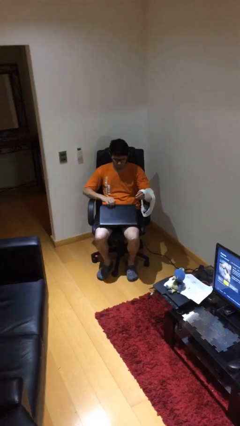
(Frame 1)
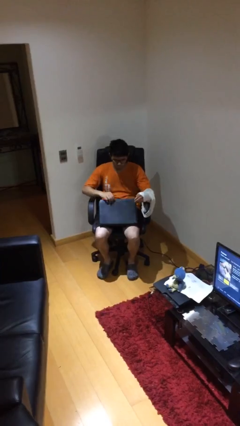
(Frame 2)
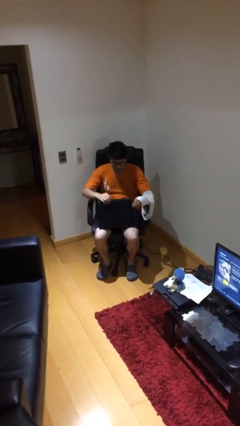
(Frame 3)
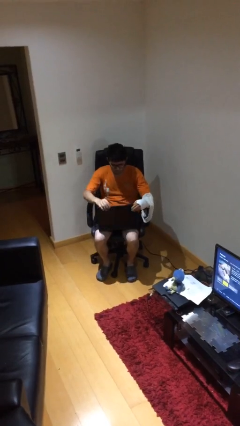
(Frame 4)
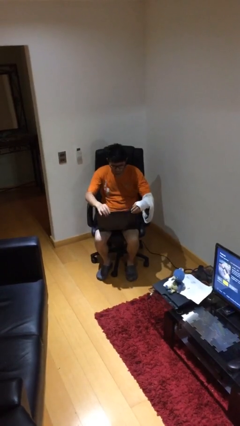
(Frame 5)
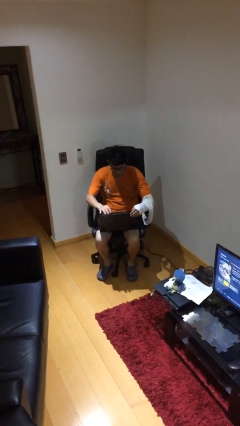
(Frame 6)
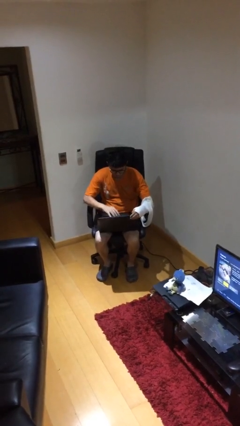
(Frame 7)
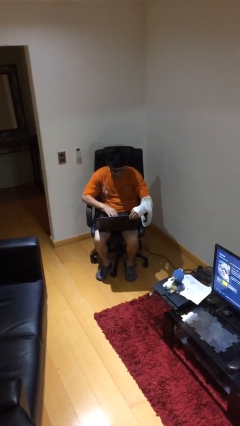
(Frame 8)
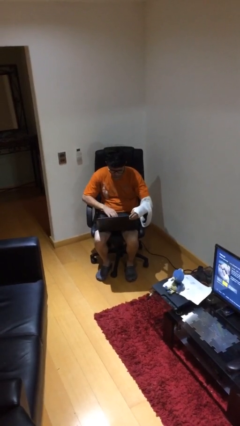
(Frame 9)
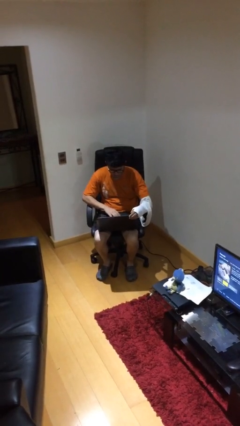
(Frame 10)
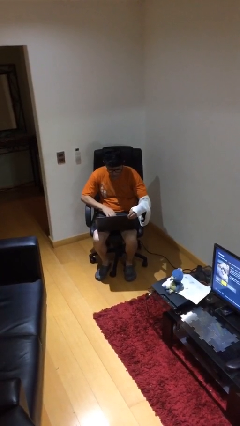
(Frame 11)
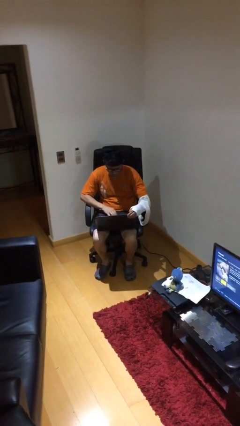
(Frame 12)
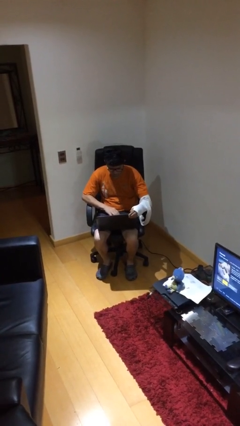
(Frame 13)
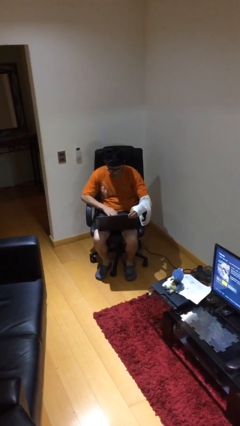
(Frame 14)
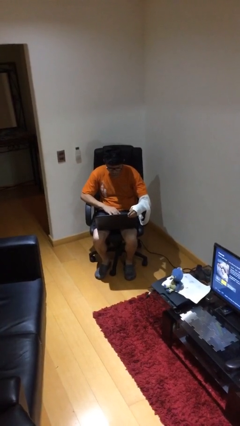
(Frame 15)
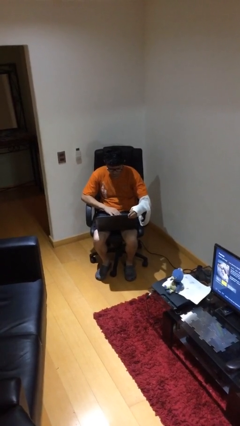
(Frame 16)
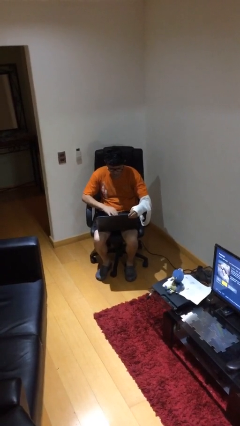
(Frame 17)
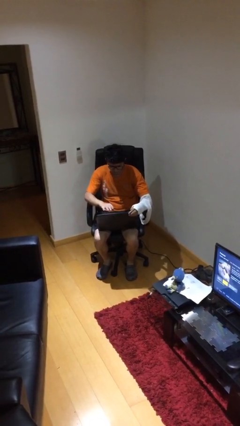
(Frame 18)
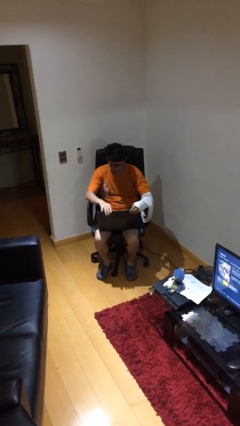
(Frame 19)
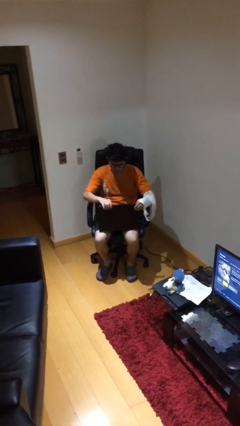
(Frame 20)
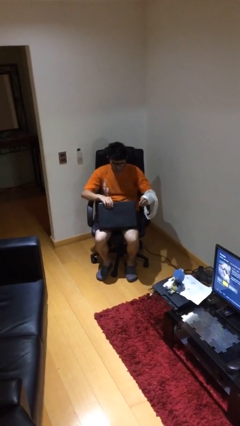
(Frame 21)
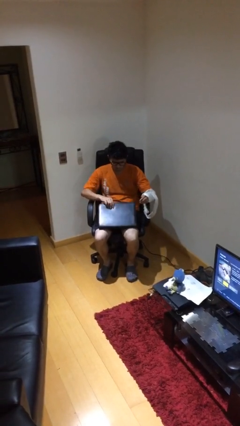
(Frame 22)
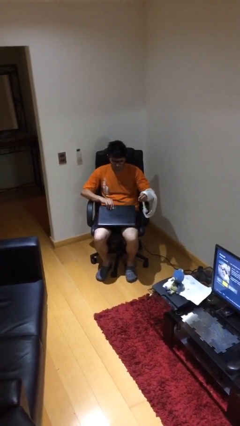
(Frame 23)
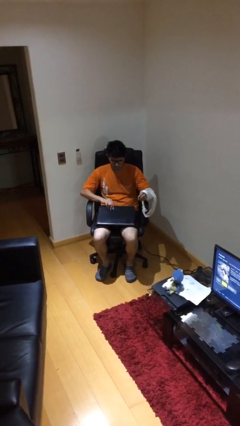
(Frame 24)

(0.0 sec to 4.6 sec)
person interacts with laptop

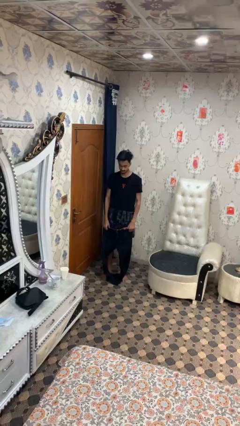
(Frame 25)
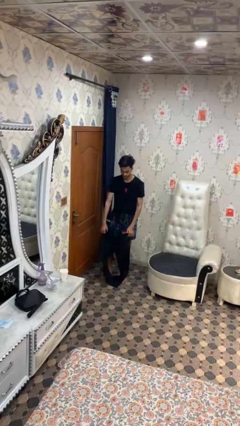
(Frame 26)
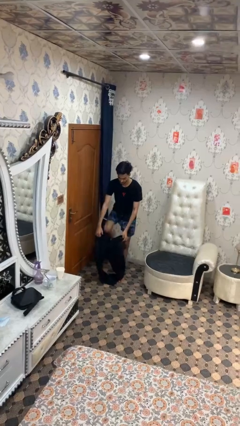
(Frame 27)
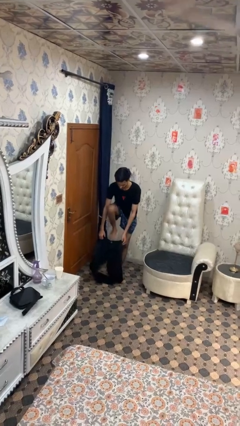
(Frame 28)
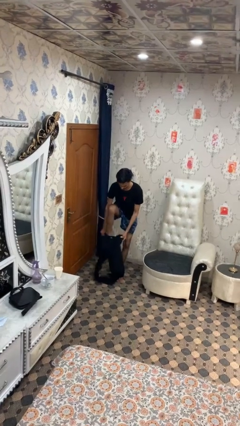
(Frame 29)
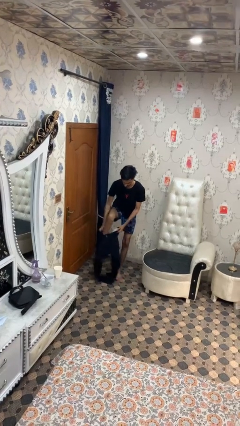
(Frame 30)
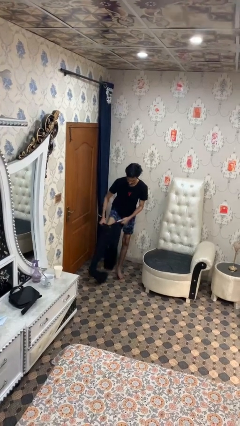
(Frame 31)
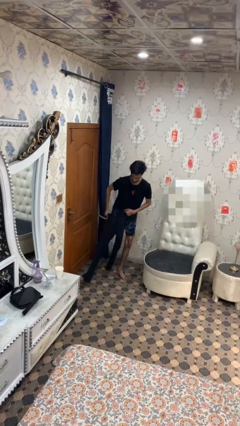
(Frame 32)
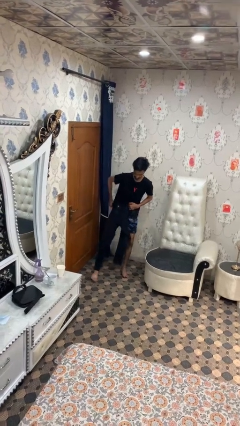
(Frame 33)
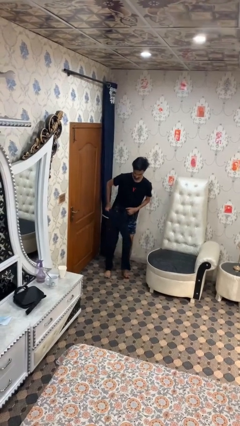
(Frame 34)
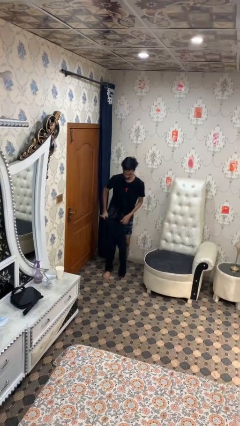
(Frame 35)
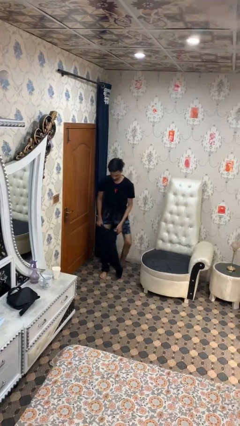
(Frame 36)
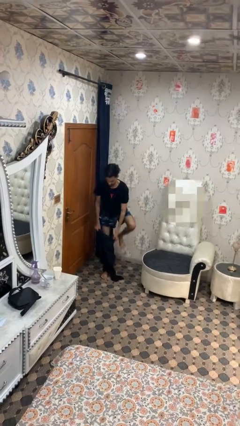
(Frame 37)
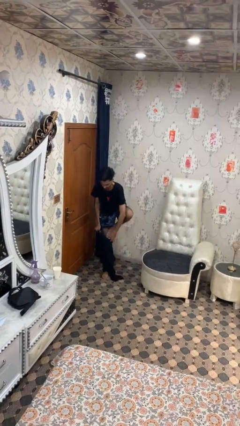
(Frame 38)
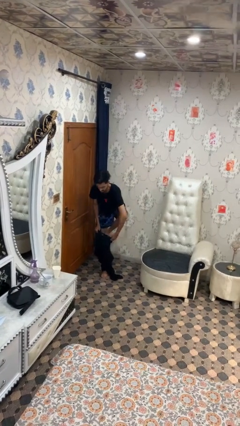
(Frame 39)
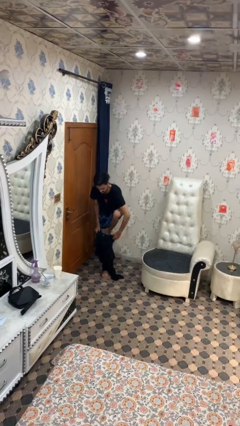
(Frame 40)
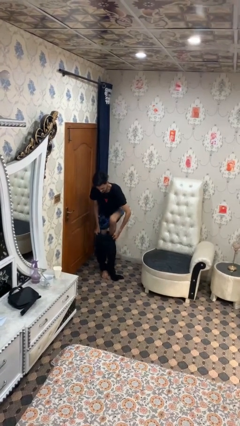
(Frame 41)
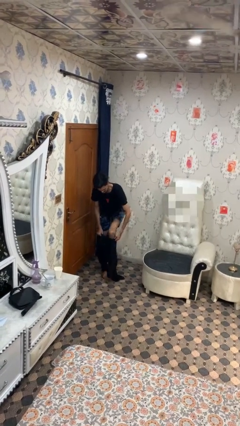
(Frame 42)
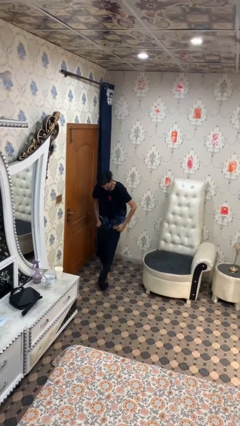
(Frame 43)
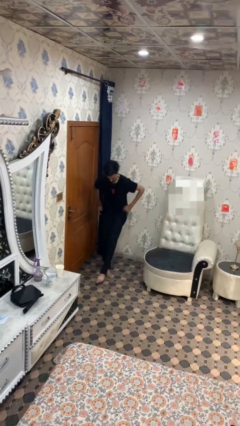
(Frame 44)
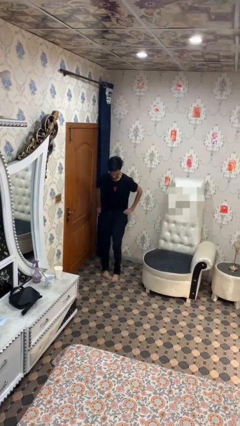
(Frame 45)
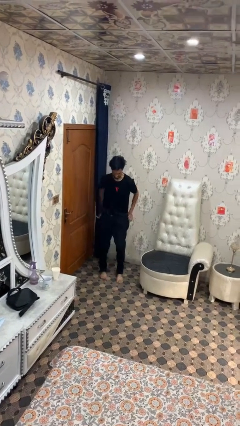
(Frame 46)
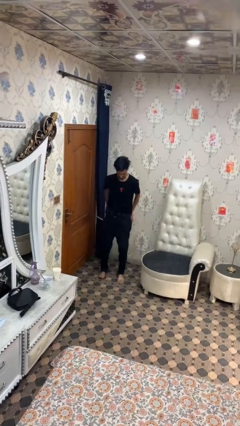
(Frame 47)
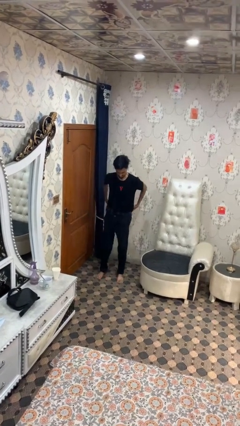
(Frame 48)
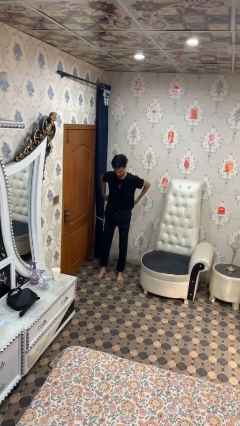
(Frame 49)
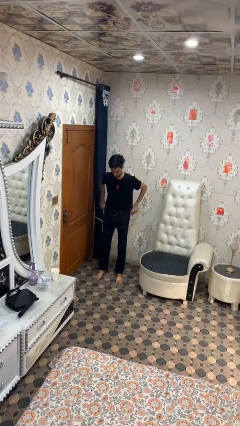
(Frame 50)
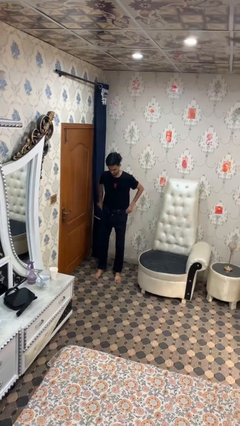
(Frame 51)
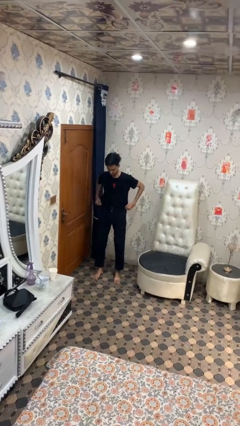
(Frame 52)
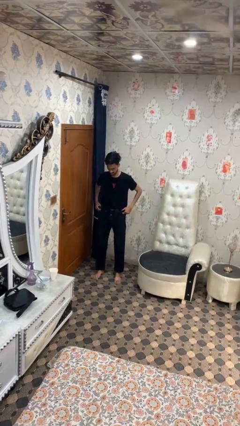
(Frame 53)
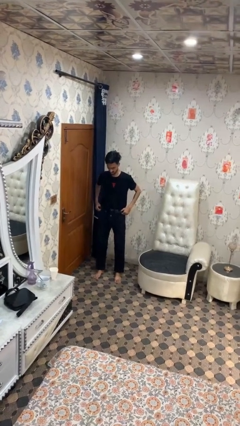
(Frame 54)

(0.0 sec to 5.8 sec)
person puts on pants

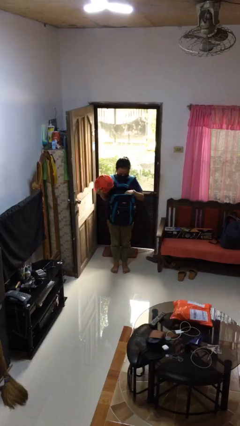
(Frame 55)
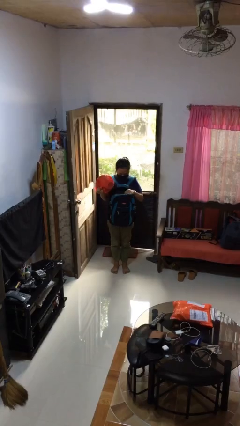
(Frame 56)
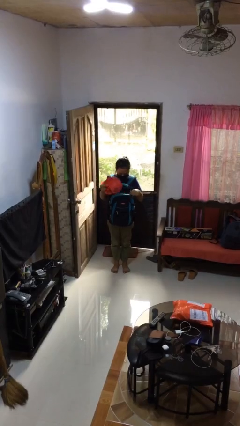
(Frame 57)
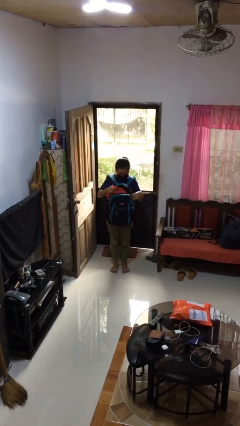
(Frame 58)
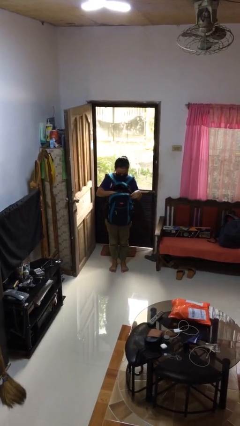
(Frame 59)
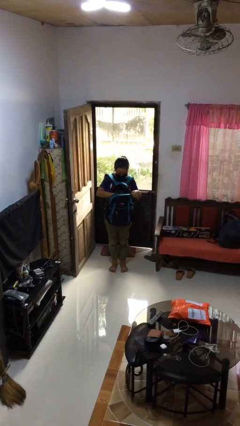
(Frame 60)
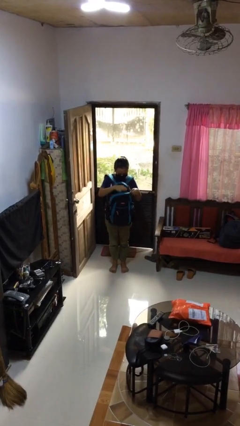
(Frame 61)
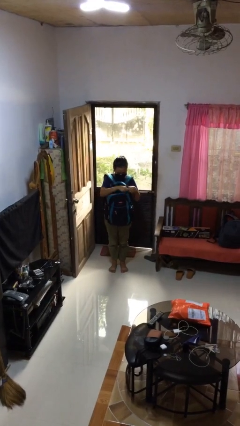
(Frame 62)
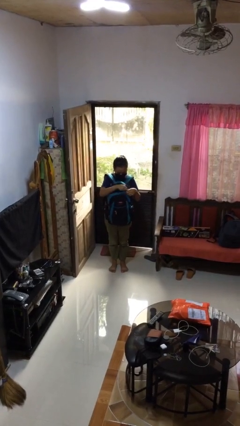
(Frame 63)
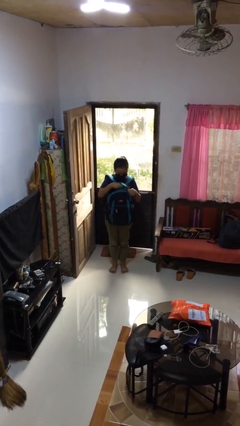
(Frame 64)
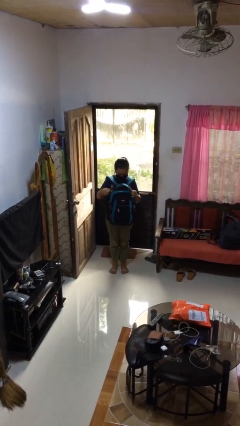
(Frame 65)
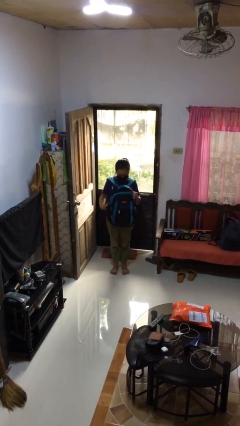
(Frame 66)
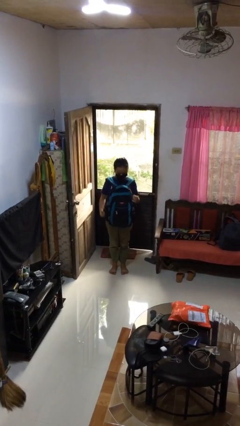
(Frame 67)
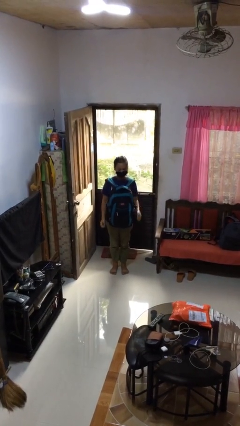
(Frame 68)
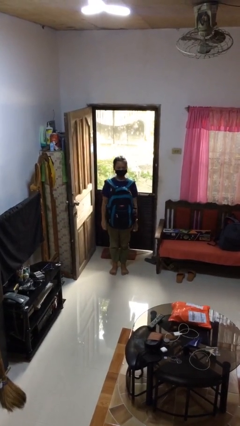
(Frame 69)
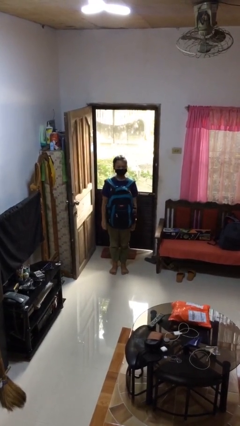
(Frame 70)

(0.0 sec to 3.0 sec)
person puts object into backpack

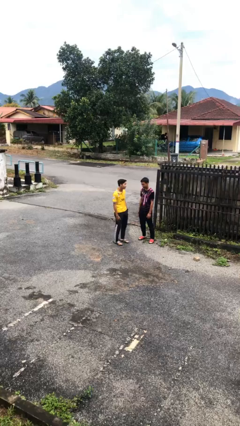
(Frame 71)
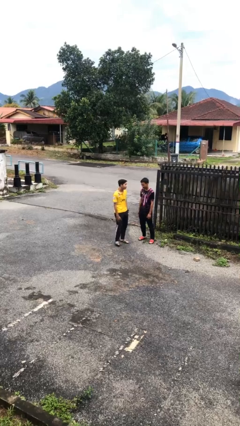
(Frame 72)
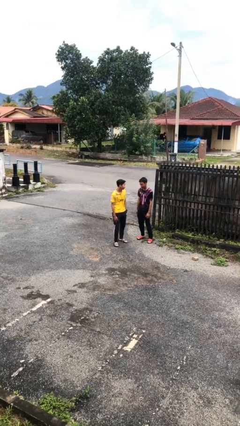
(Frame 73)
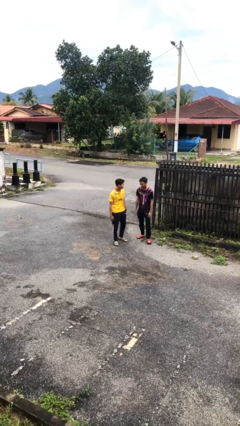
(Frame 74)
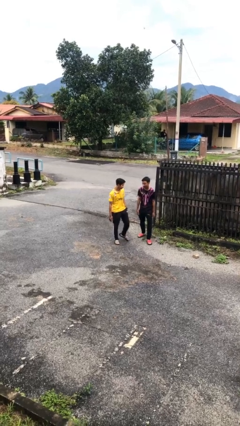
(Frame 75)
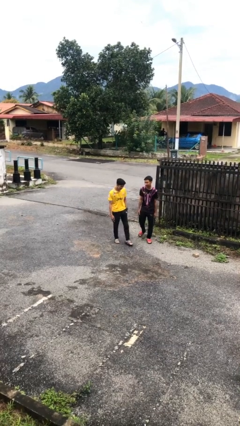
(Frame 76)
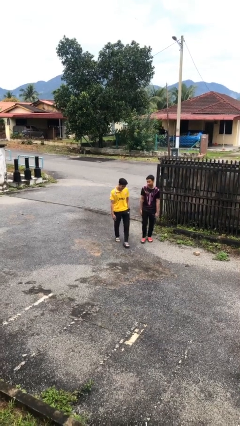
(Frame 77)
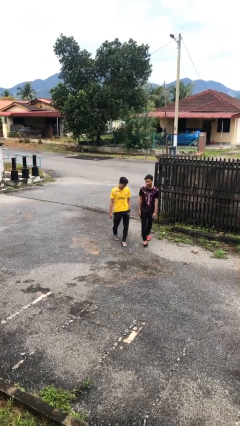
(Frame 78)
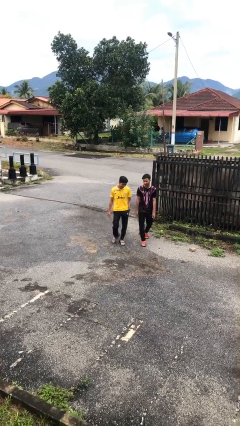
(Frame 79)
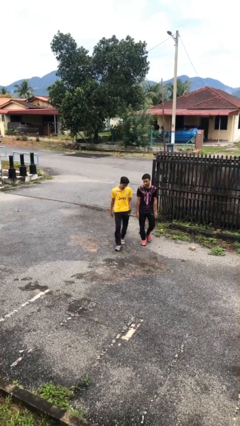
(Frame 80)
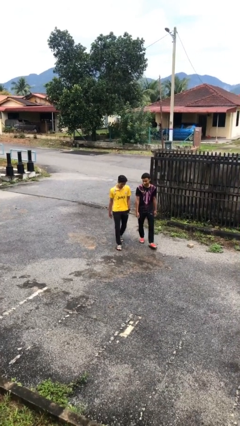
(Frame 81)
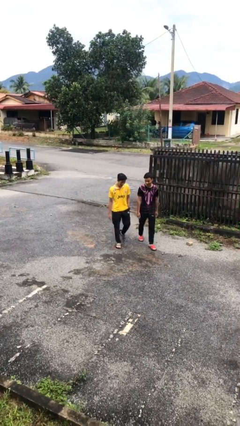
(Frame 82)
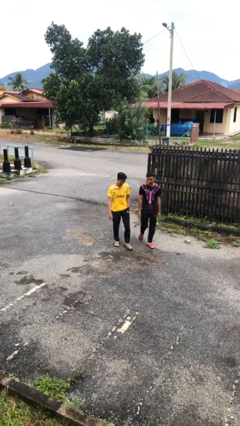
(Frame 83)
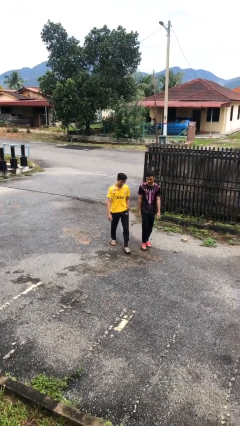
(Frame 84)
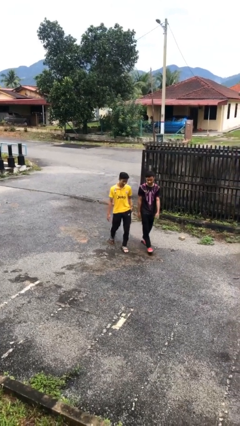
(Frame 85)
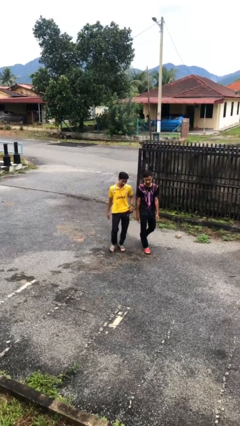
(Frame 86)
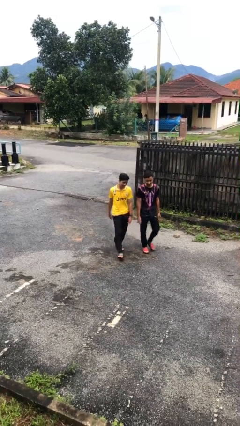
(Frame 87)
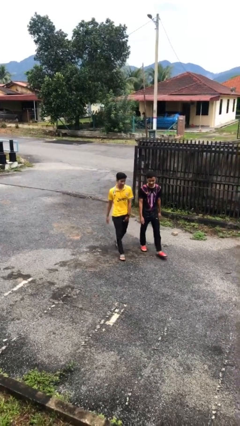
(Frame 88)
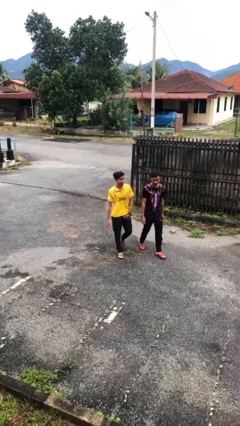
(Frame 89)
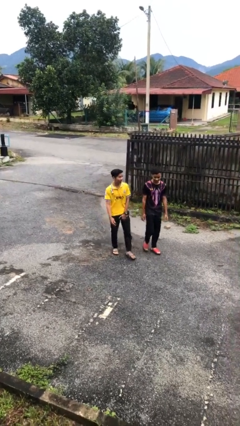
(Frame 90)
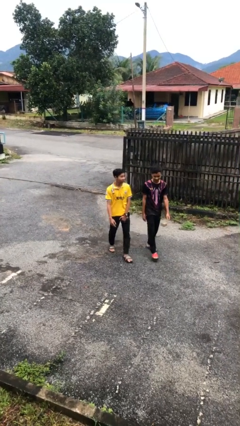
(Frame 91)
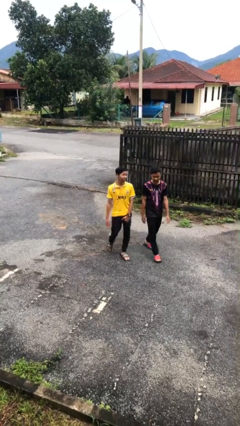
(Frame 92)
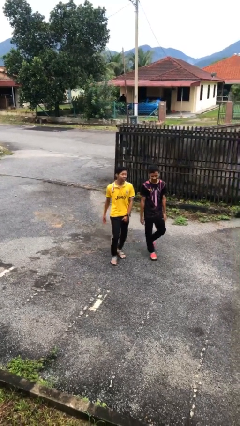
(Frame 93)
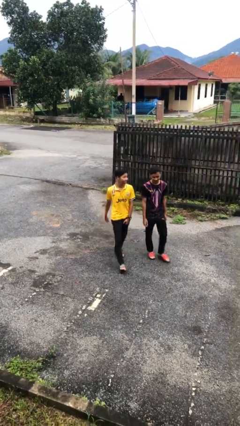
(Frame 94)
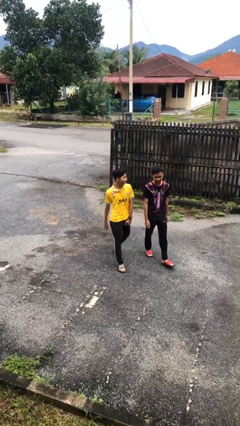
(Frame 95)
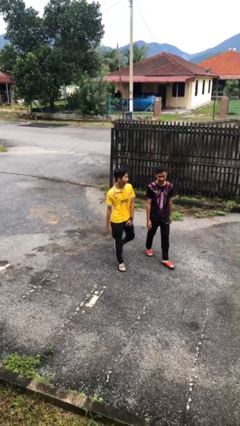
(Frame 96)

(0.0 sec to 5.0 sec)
person talks to person
